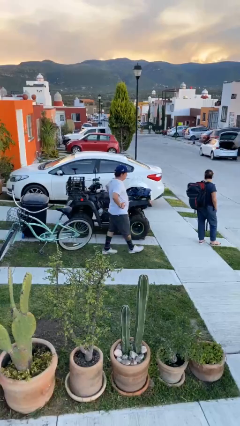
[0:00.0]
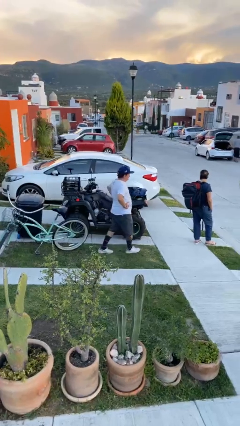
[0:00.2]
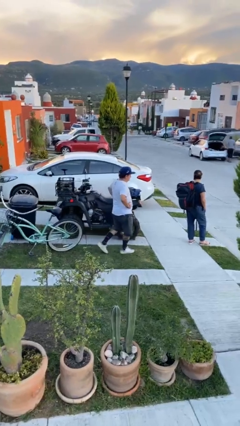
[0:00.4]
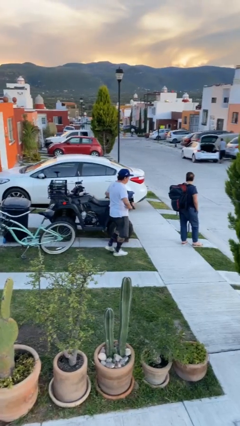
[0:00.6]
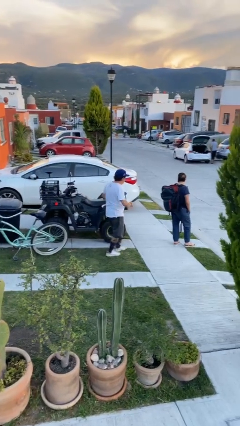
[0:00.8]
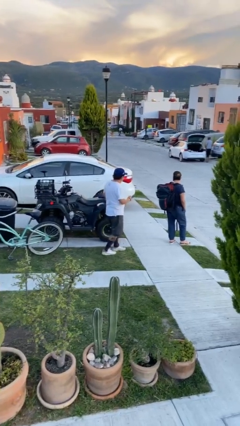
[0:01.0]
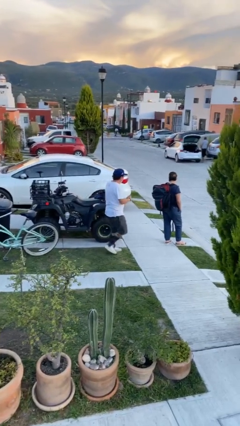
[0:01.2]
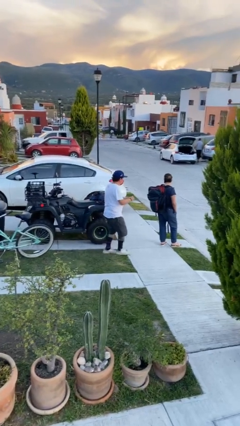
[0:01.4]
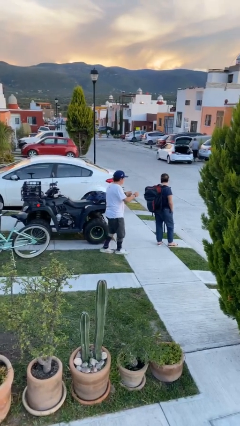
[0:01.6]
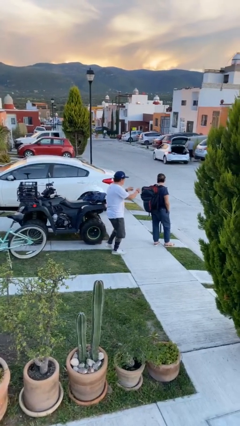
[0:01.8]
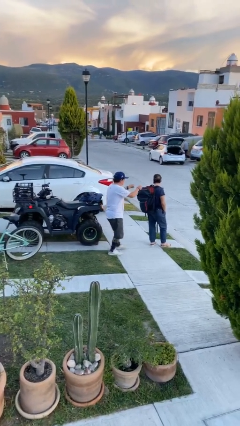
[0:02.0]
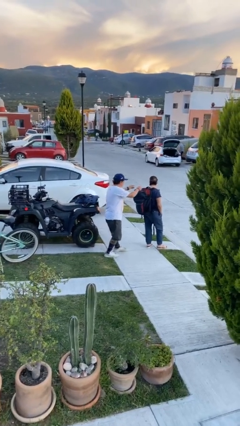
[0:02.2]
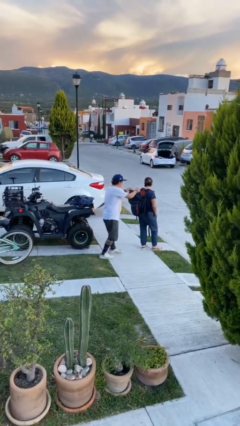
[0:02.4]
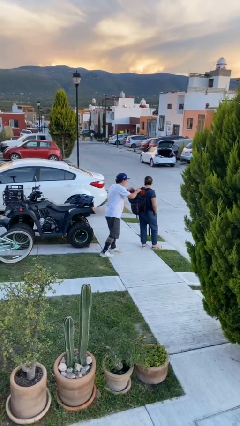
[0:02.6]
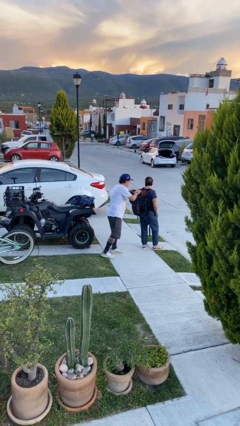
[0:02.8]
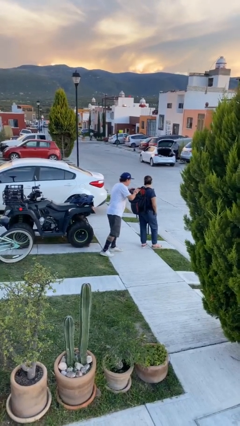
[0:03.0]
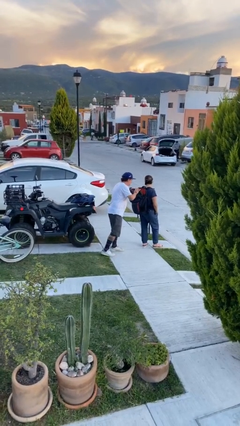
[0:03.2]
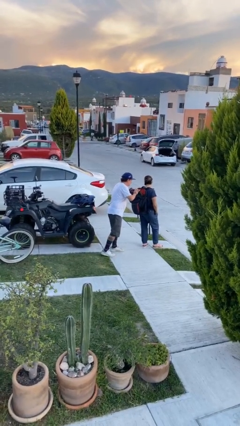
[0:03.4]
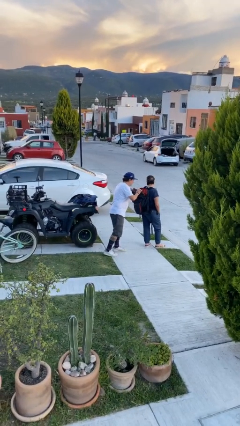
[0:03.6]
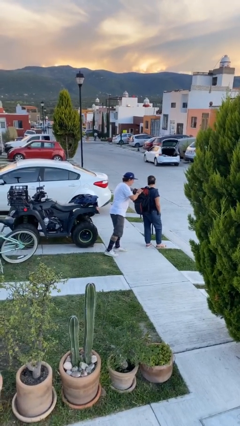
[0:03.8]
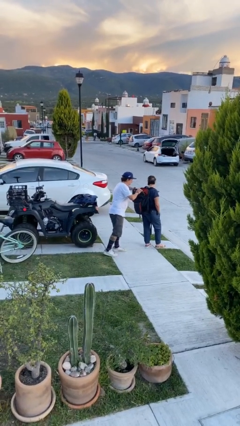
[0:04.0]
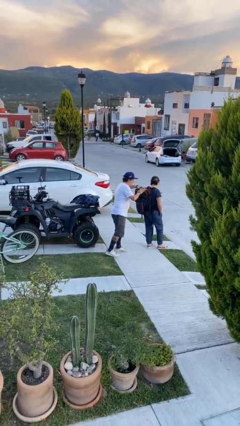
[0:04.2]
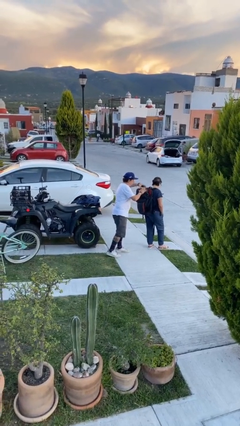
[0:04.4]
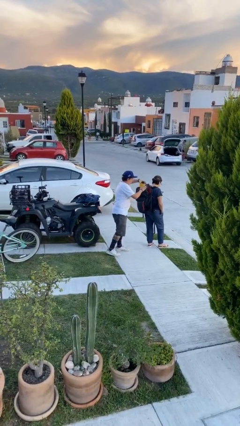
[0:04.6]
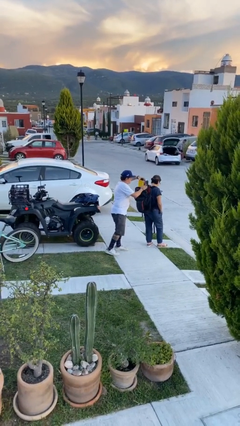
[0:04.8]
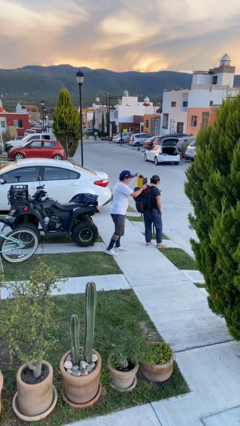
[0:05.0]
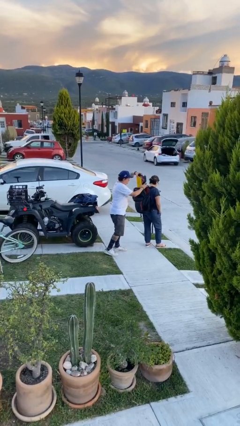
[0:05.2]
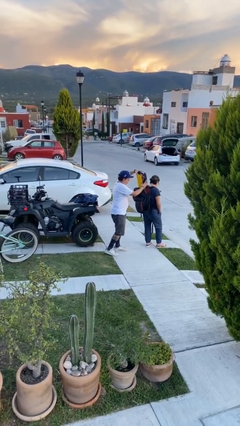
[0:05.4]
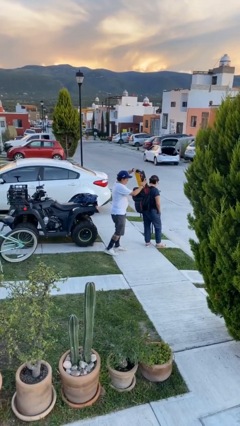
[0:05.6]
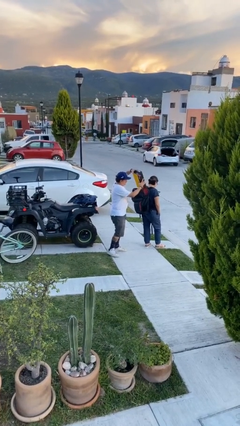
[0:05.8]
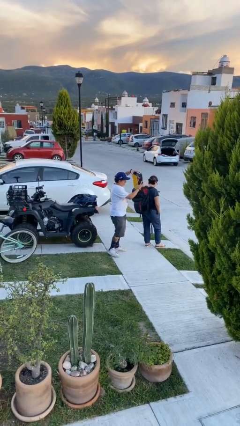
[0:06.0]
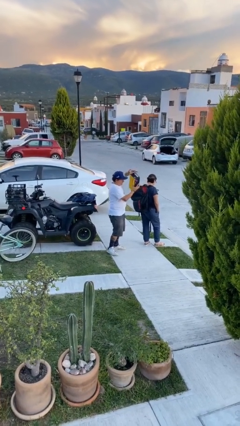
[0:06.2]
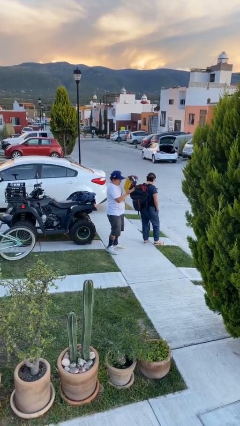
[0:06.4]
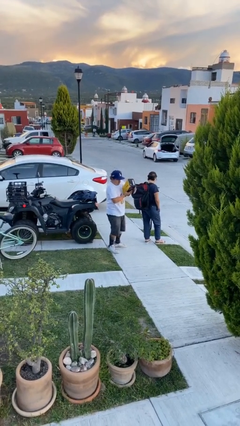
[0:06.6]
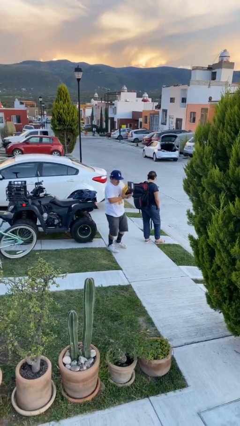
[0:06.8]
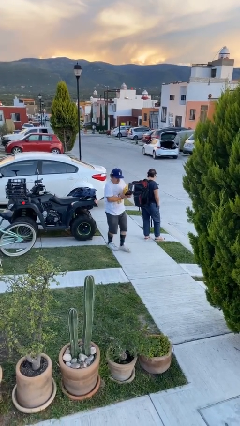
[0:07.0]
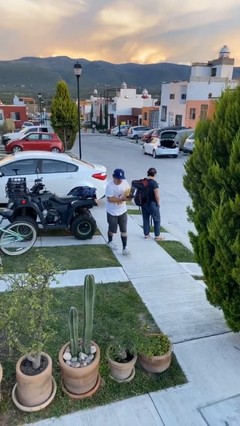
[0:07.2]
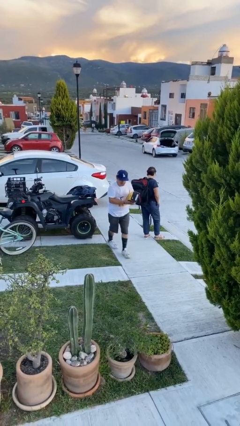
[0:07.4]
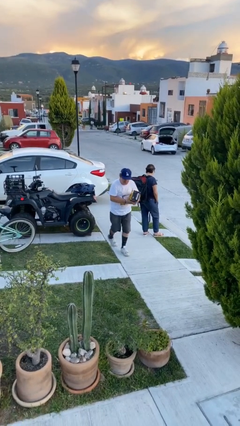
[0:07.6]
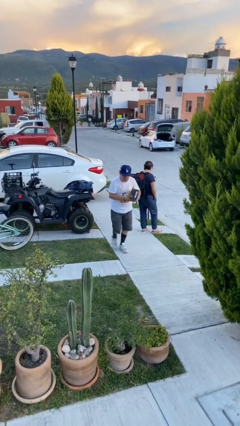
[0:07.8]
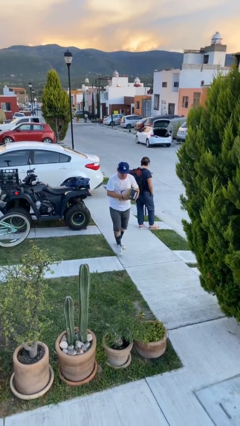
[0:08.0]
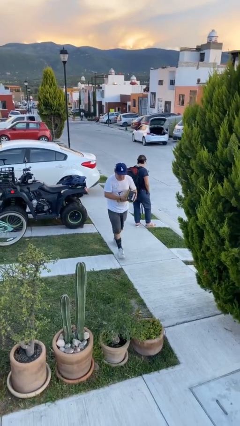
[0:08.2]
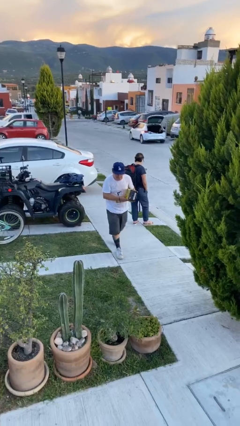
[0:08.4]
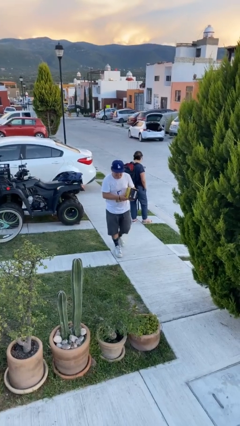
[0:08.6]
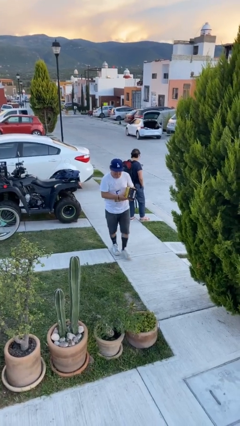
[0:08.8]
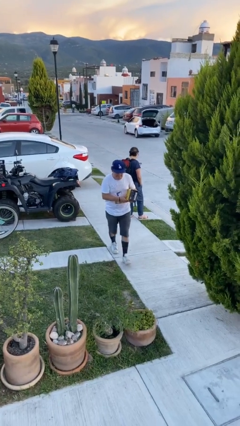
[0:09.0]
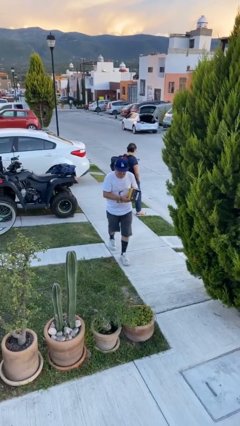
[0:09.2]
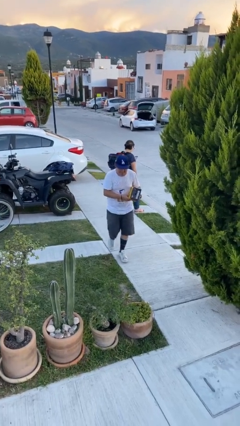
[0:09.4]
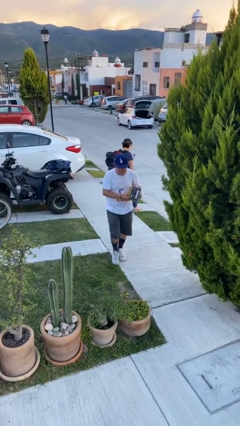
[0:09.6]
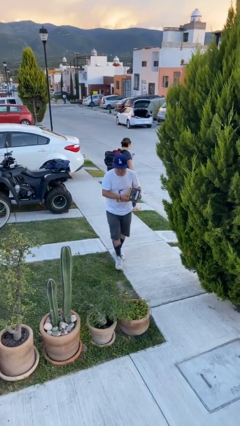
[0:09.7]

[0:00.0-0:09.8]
person steals object from person

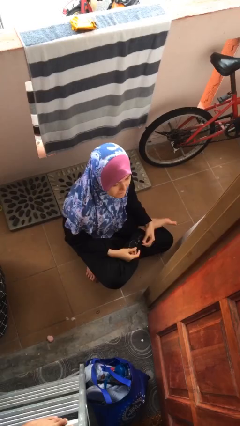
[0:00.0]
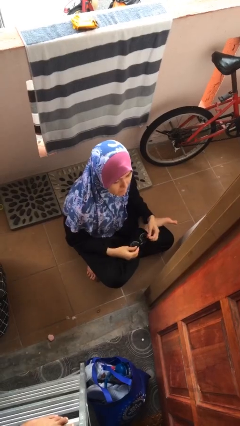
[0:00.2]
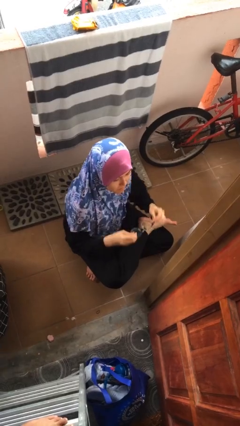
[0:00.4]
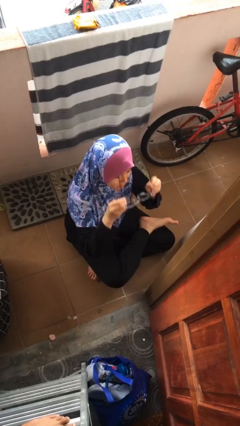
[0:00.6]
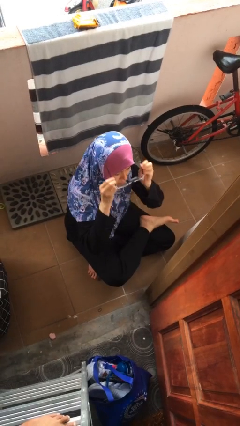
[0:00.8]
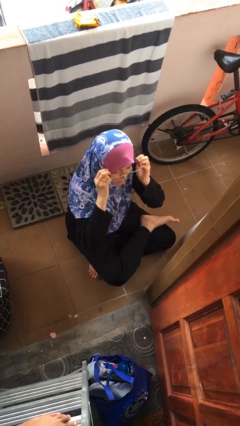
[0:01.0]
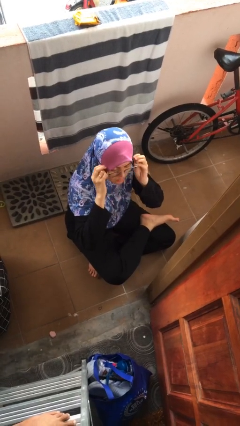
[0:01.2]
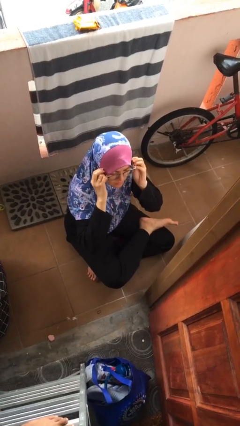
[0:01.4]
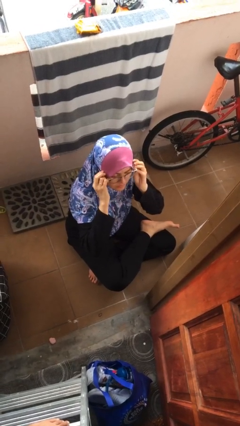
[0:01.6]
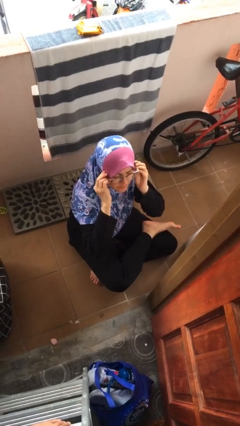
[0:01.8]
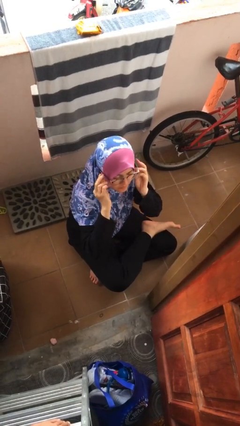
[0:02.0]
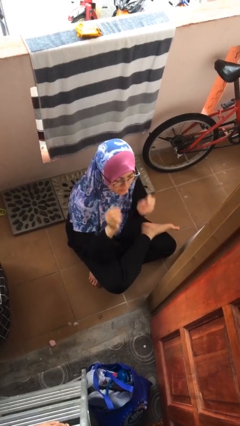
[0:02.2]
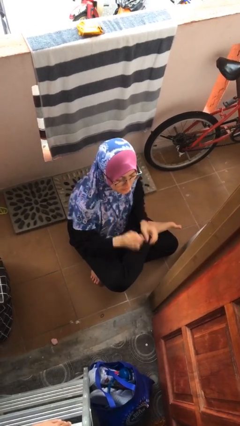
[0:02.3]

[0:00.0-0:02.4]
person puts on glasses

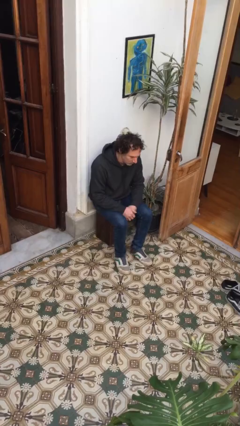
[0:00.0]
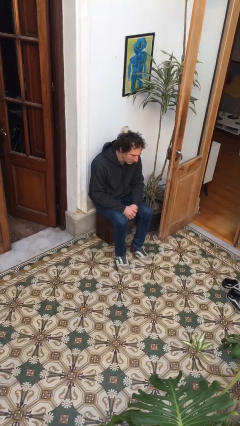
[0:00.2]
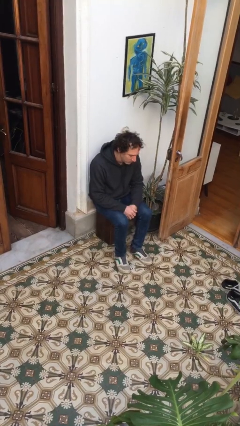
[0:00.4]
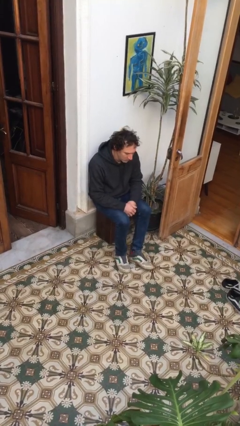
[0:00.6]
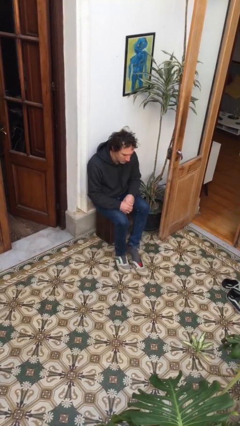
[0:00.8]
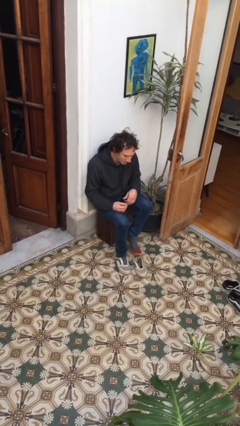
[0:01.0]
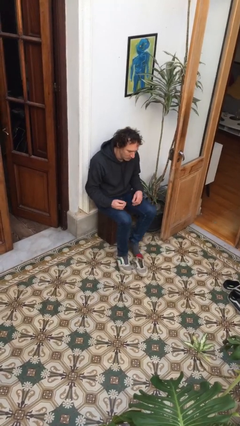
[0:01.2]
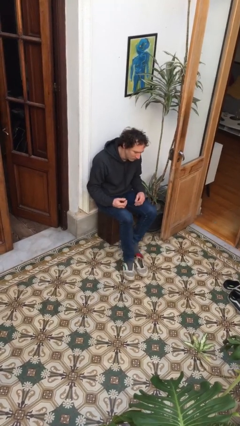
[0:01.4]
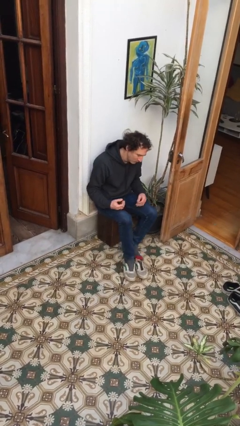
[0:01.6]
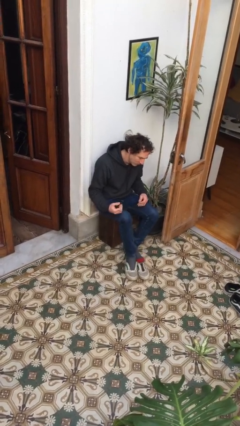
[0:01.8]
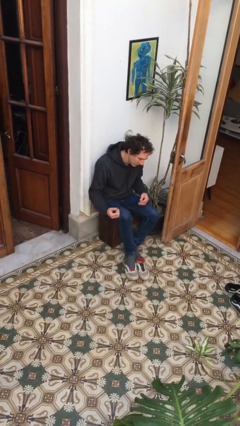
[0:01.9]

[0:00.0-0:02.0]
person takes off shoes

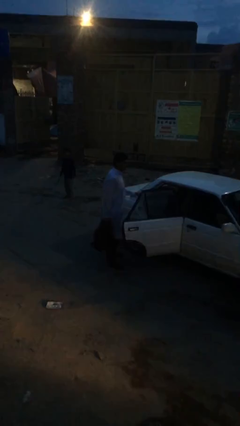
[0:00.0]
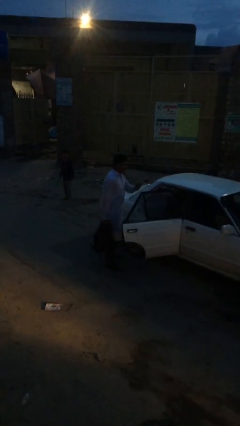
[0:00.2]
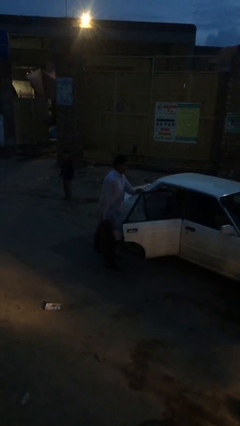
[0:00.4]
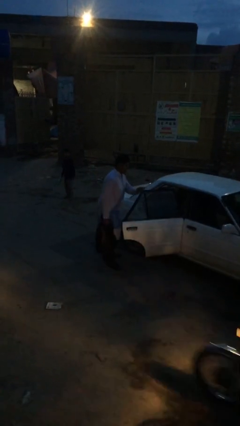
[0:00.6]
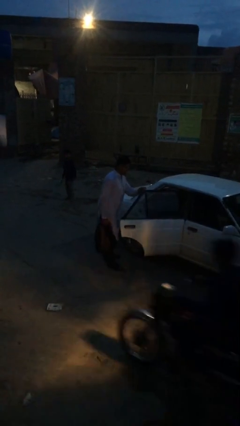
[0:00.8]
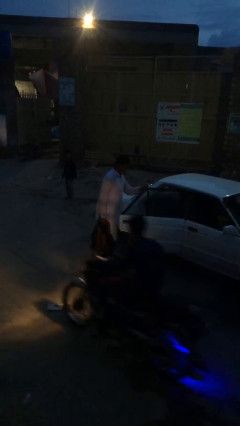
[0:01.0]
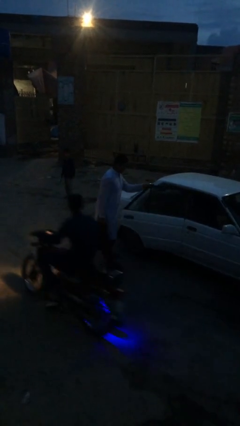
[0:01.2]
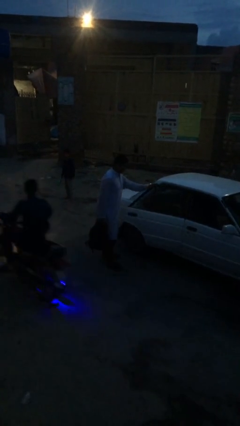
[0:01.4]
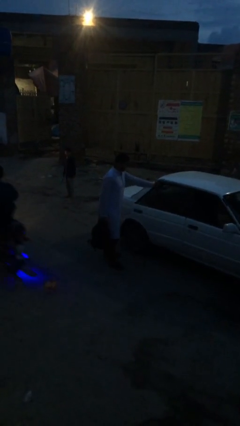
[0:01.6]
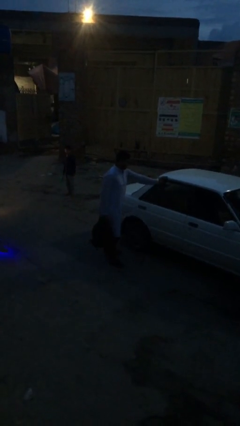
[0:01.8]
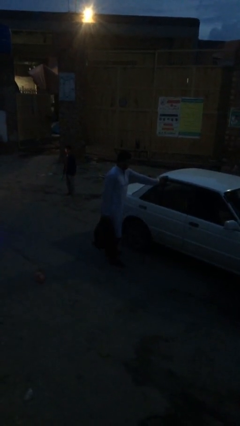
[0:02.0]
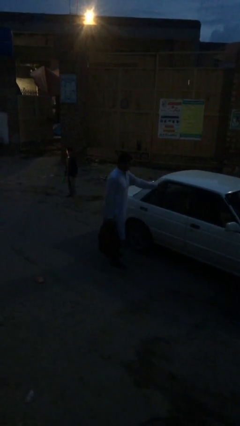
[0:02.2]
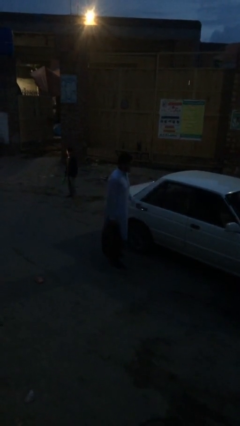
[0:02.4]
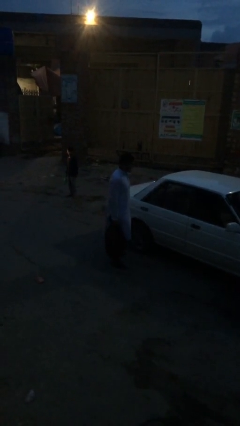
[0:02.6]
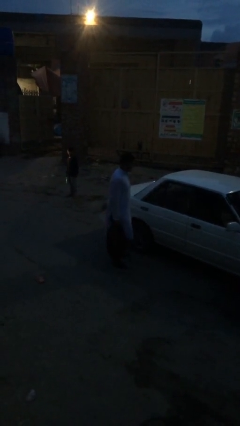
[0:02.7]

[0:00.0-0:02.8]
person closes car door

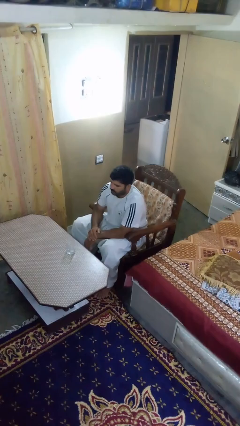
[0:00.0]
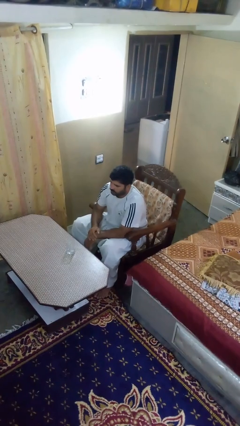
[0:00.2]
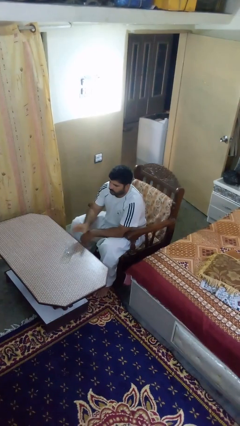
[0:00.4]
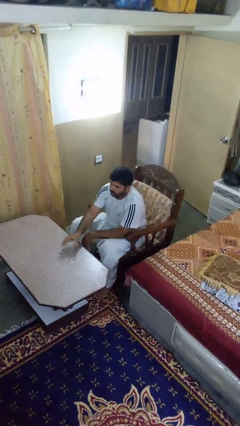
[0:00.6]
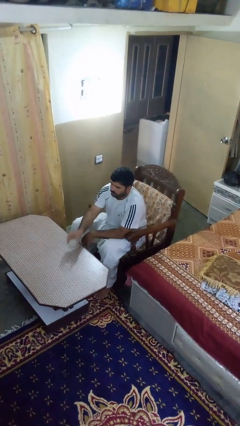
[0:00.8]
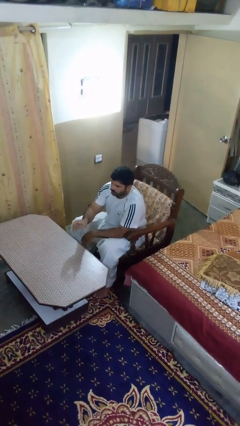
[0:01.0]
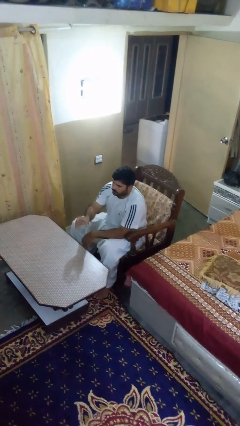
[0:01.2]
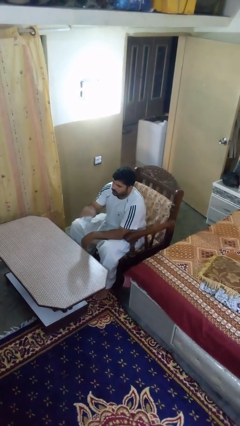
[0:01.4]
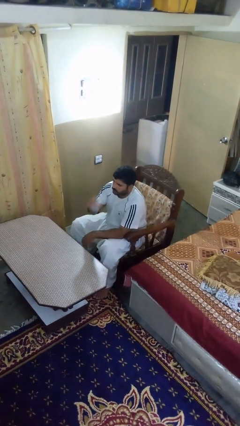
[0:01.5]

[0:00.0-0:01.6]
person picks up object from table
